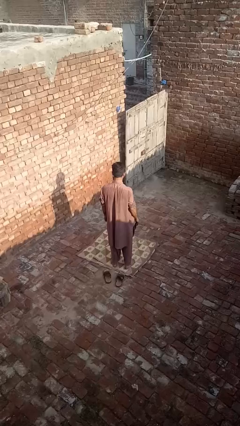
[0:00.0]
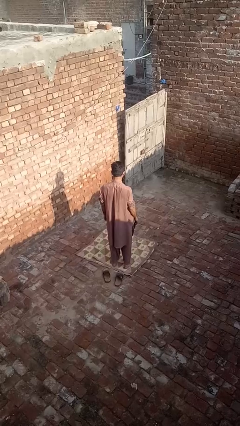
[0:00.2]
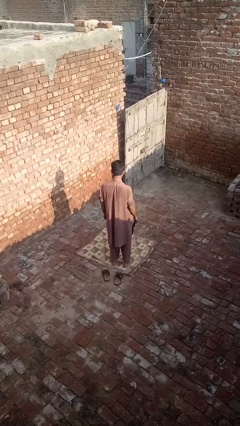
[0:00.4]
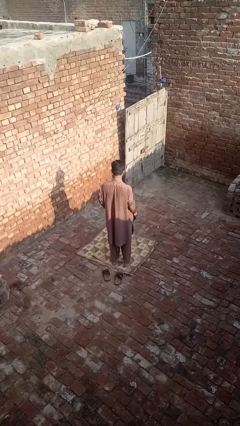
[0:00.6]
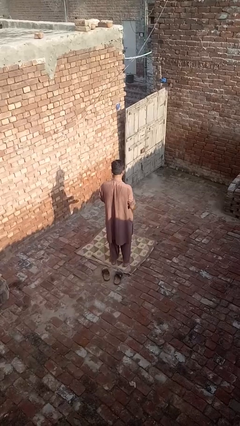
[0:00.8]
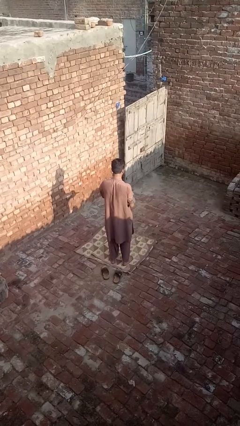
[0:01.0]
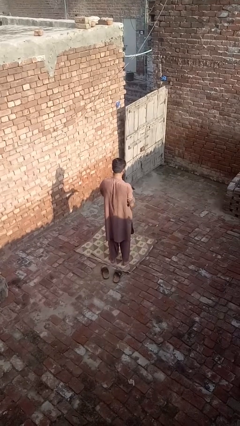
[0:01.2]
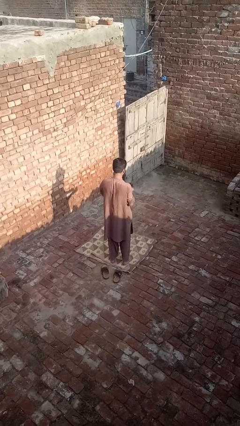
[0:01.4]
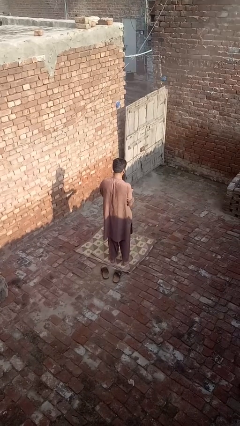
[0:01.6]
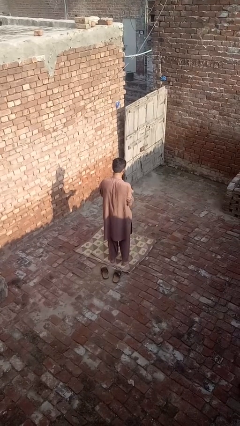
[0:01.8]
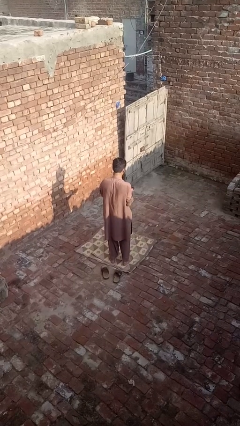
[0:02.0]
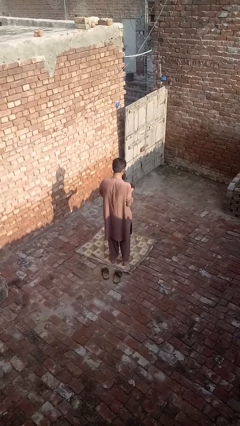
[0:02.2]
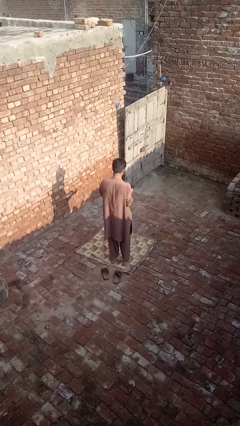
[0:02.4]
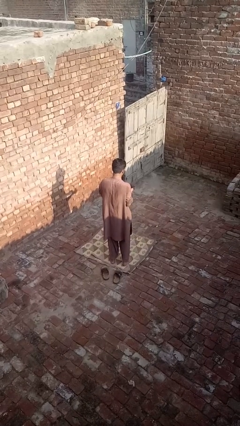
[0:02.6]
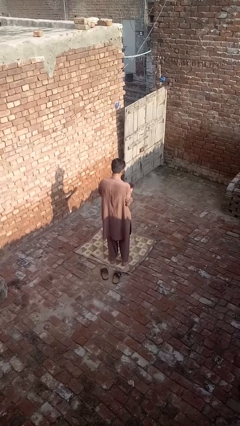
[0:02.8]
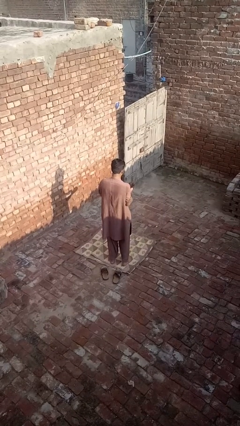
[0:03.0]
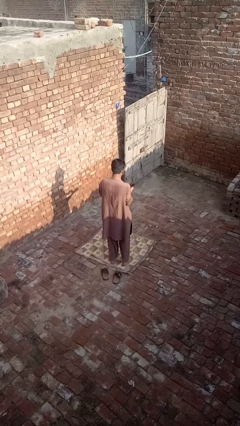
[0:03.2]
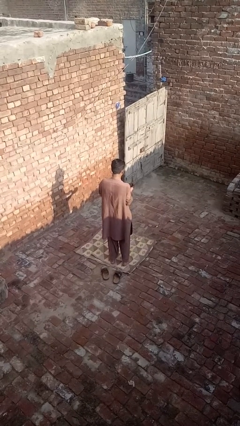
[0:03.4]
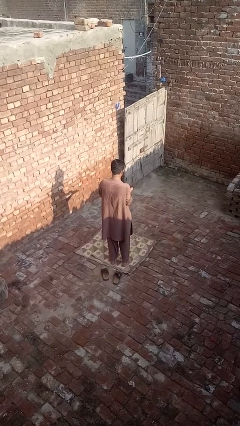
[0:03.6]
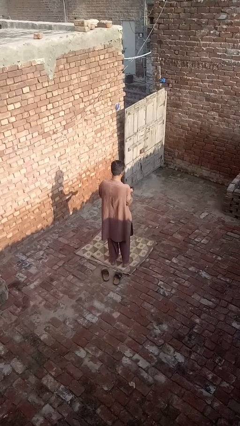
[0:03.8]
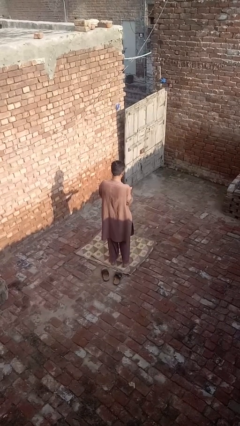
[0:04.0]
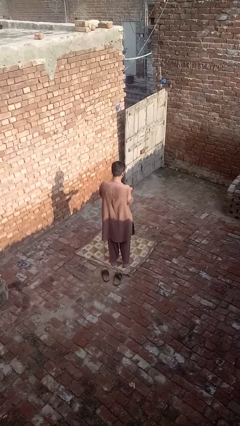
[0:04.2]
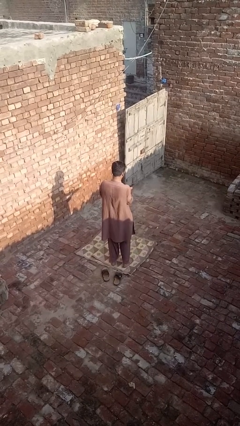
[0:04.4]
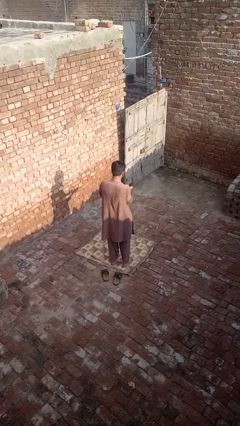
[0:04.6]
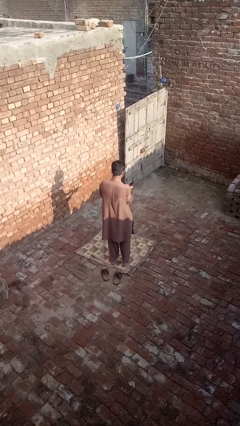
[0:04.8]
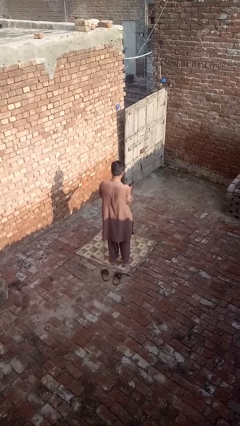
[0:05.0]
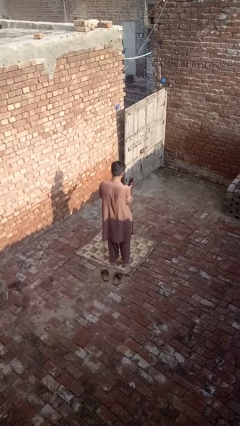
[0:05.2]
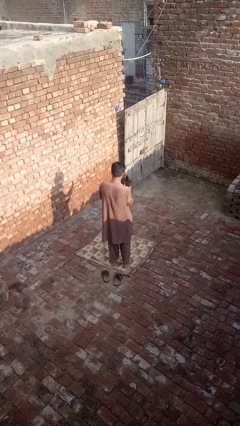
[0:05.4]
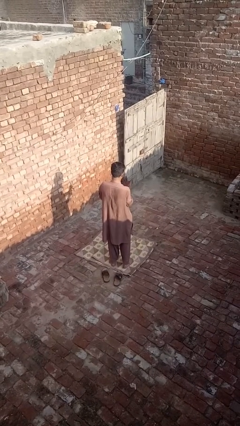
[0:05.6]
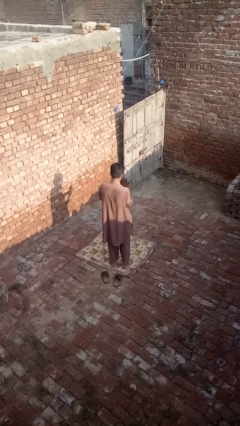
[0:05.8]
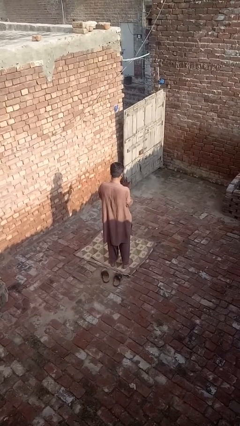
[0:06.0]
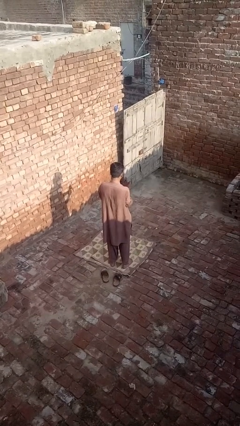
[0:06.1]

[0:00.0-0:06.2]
person puts on gloves

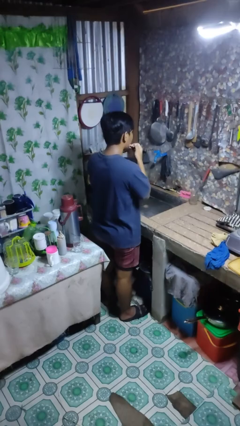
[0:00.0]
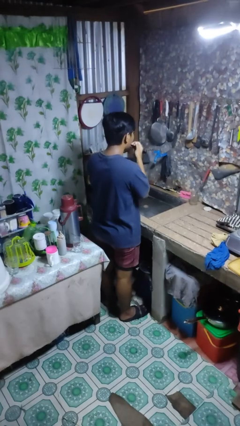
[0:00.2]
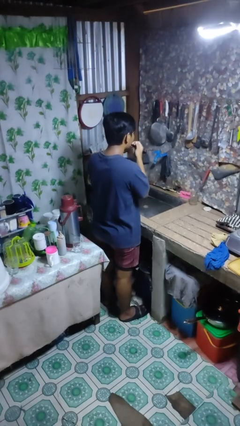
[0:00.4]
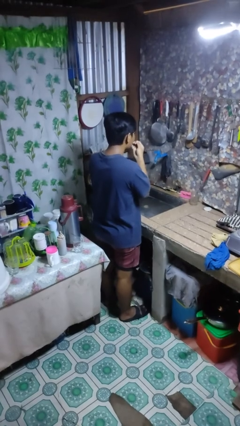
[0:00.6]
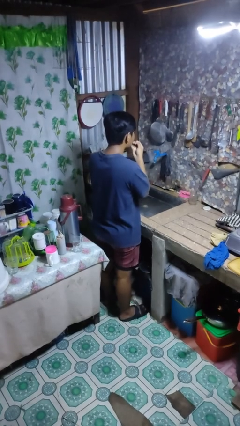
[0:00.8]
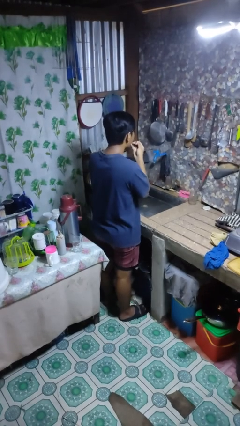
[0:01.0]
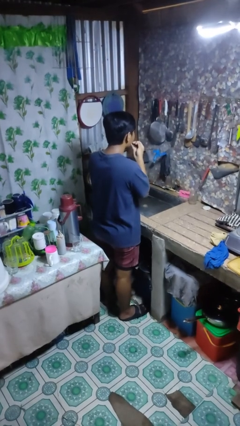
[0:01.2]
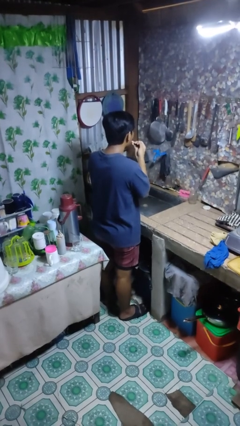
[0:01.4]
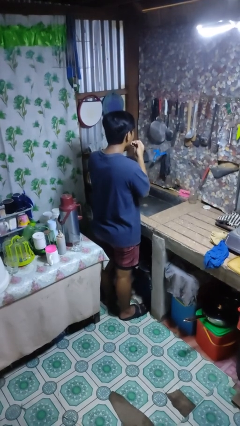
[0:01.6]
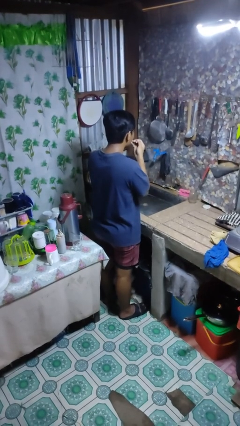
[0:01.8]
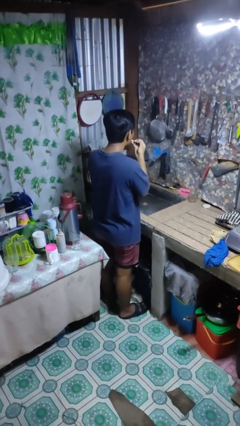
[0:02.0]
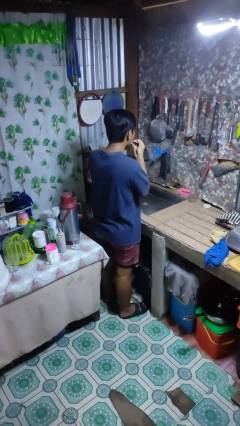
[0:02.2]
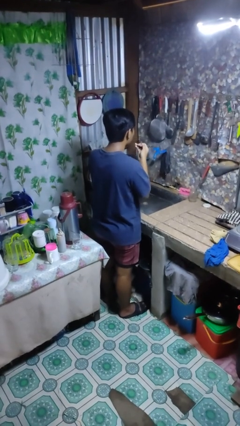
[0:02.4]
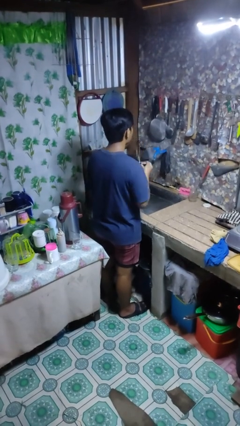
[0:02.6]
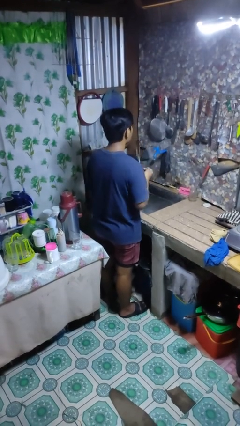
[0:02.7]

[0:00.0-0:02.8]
person flosses

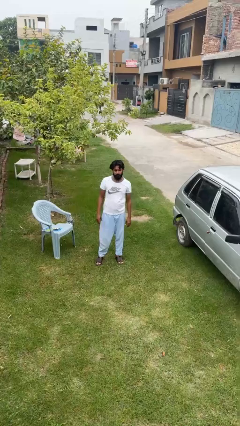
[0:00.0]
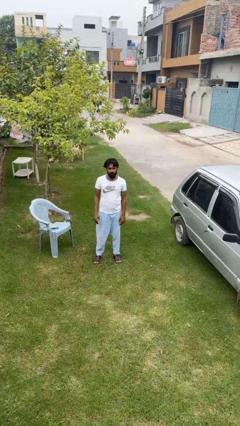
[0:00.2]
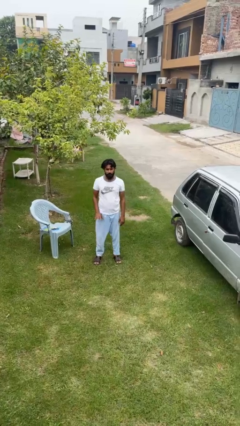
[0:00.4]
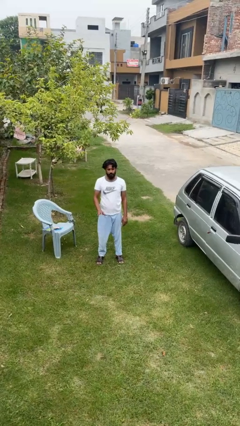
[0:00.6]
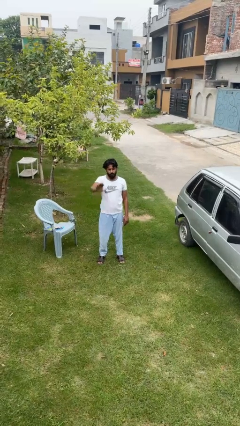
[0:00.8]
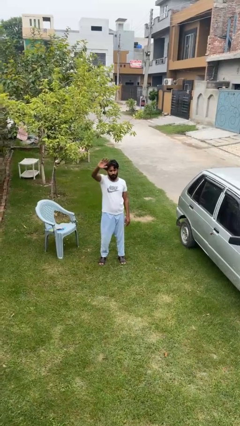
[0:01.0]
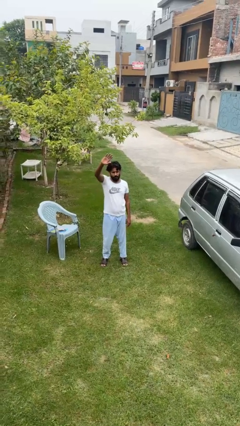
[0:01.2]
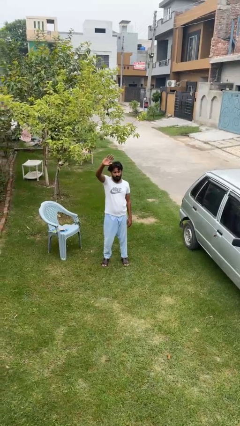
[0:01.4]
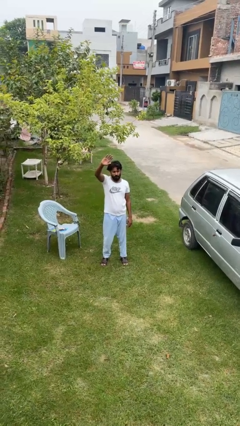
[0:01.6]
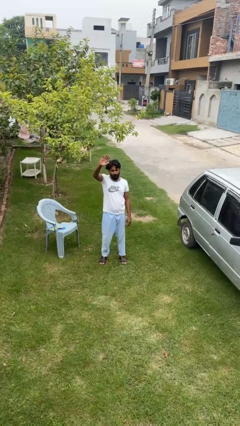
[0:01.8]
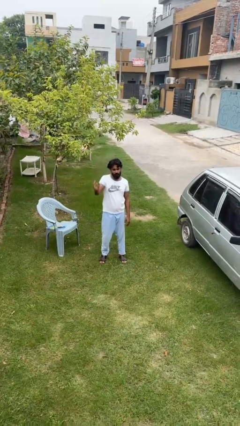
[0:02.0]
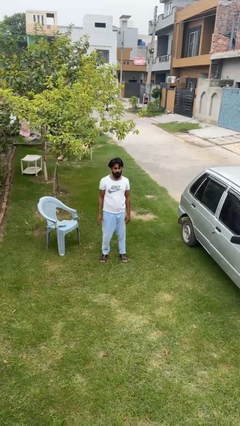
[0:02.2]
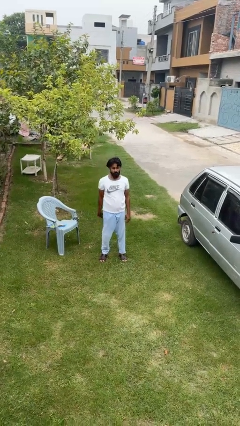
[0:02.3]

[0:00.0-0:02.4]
person gestures swipe up

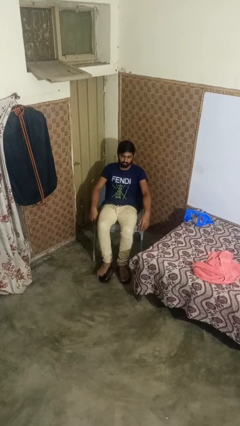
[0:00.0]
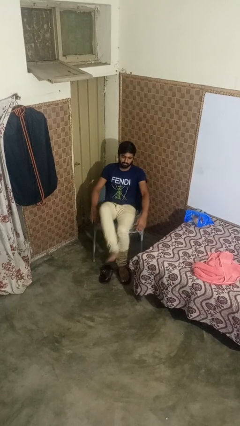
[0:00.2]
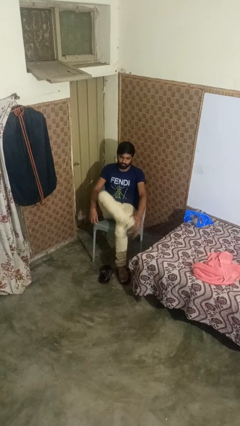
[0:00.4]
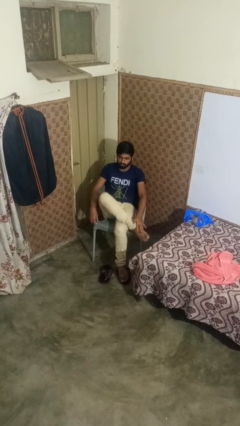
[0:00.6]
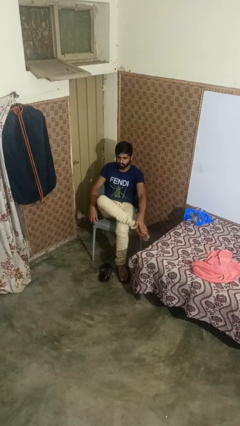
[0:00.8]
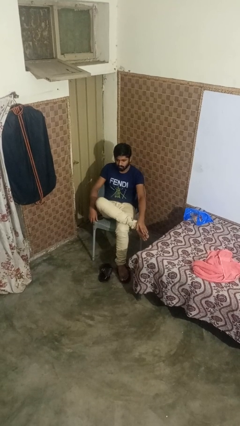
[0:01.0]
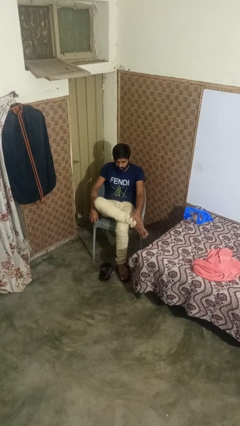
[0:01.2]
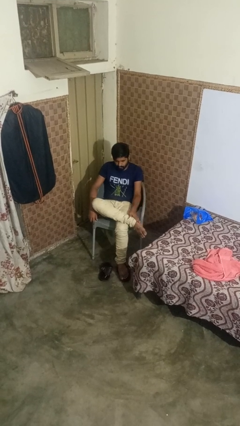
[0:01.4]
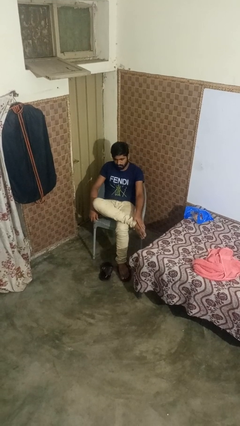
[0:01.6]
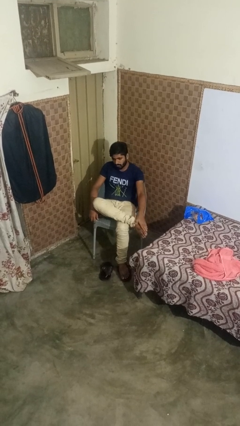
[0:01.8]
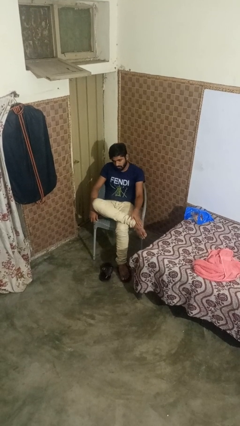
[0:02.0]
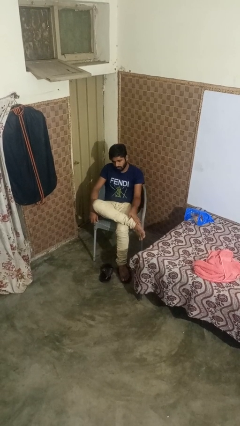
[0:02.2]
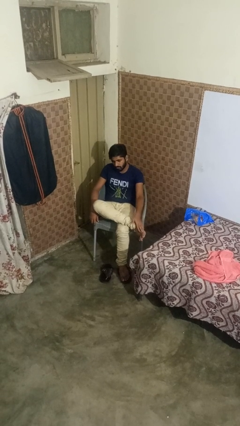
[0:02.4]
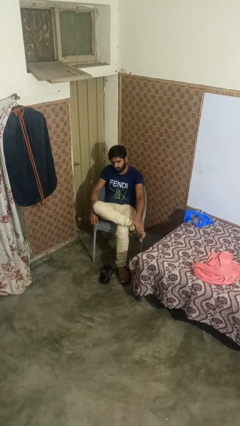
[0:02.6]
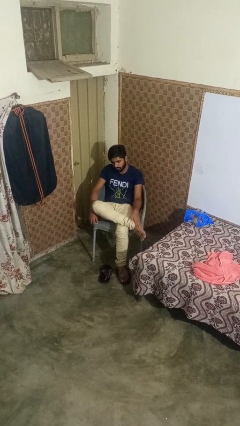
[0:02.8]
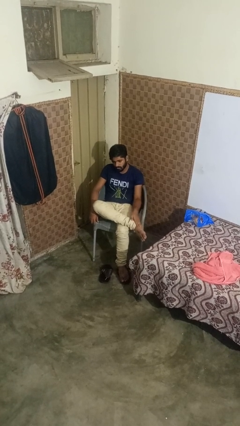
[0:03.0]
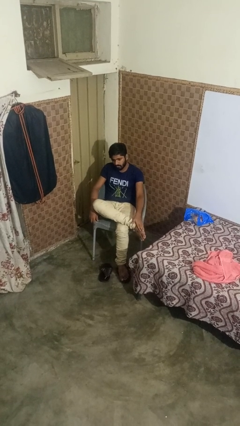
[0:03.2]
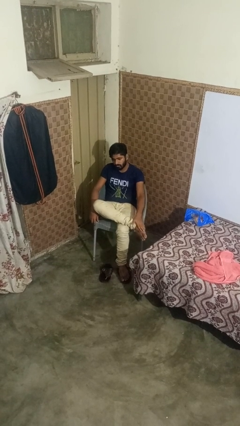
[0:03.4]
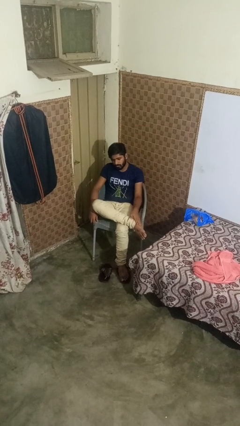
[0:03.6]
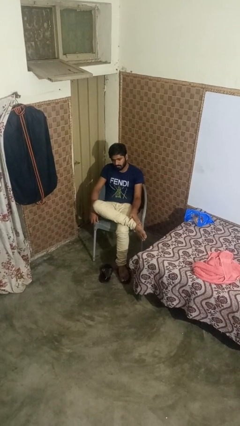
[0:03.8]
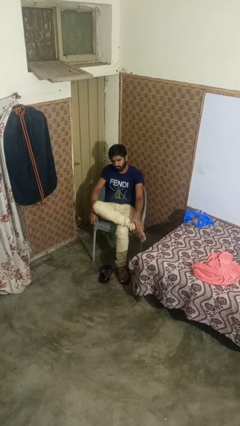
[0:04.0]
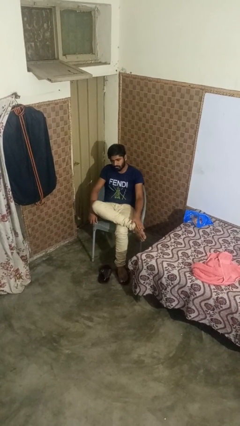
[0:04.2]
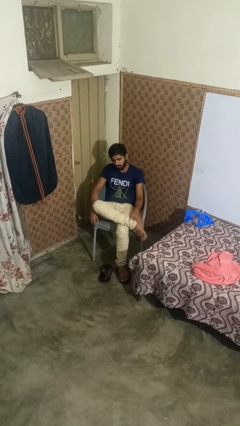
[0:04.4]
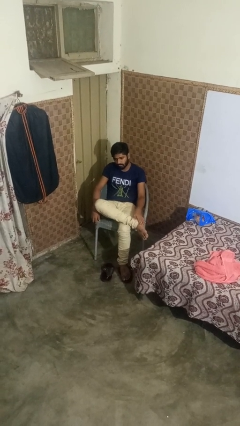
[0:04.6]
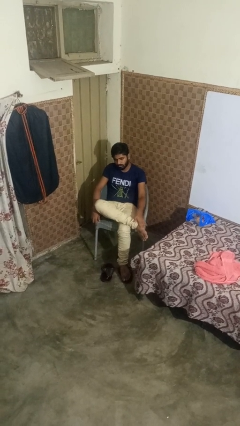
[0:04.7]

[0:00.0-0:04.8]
person rubs foot

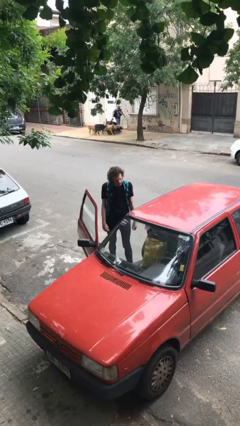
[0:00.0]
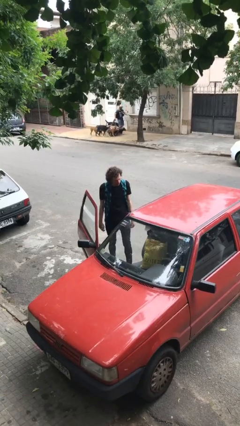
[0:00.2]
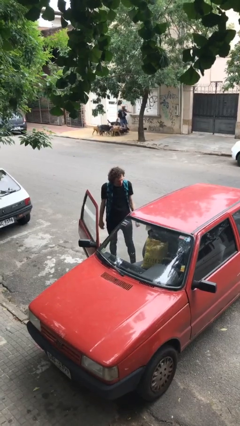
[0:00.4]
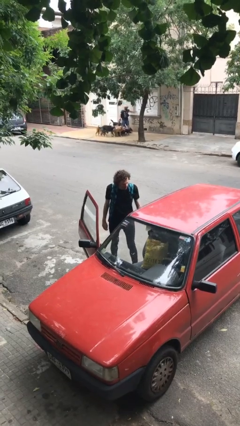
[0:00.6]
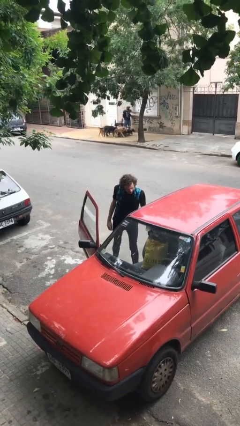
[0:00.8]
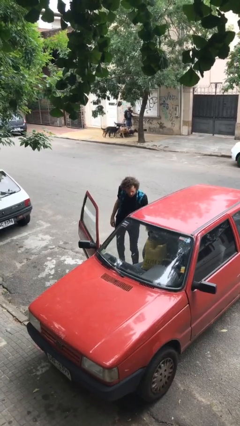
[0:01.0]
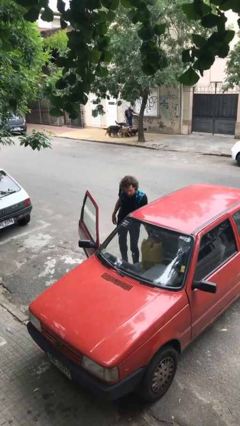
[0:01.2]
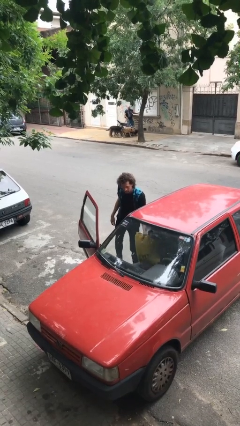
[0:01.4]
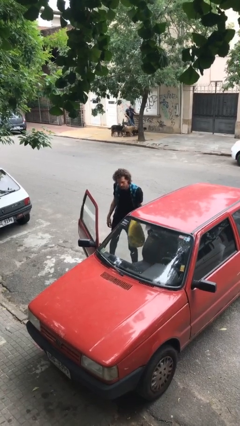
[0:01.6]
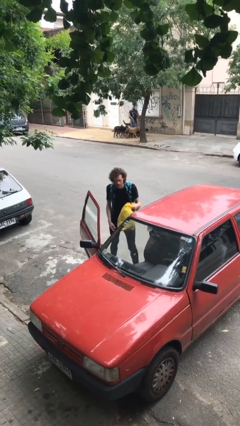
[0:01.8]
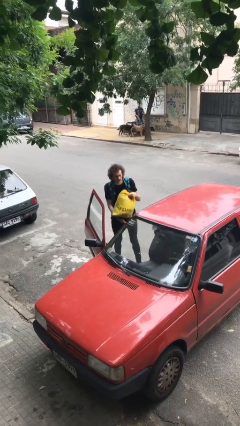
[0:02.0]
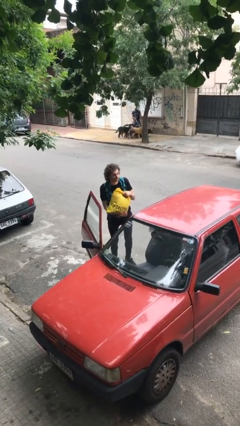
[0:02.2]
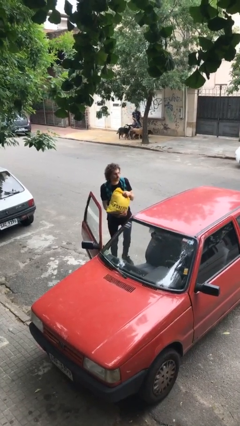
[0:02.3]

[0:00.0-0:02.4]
person unloads car
